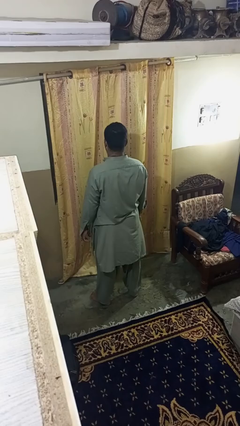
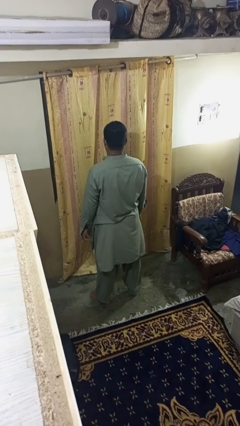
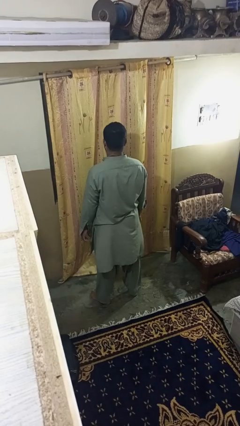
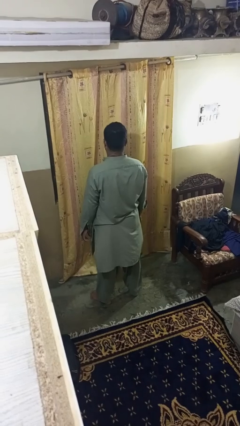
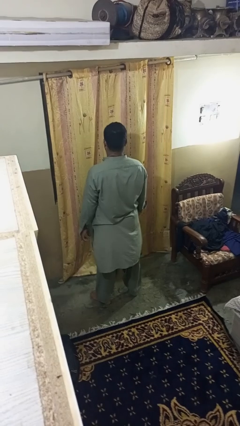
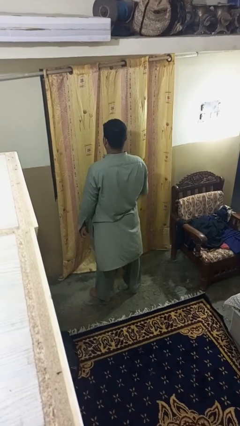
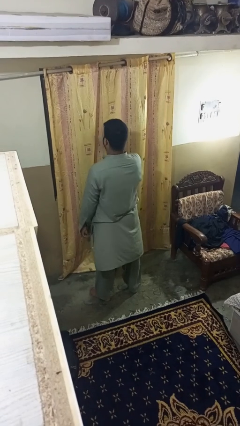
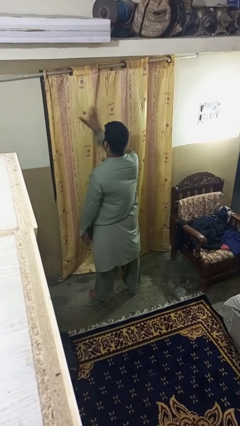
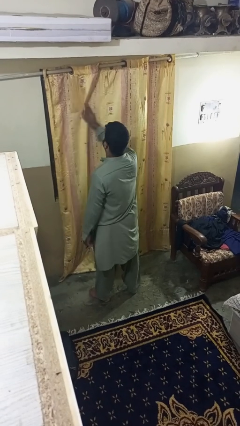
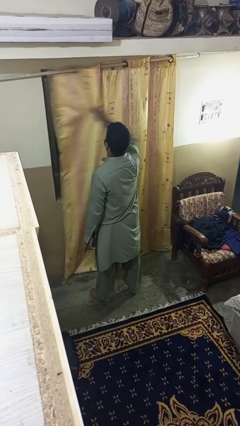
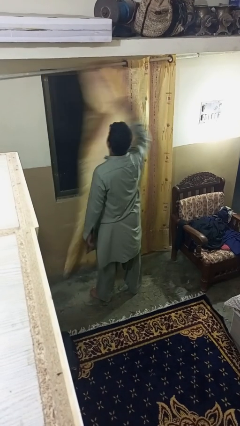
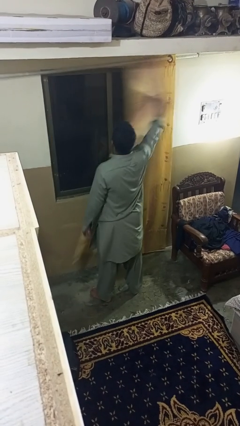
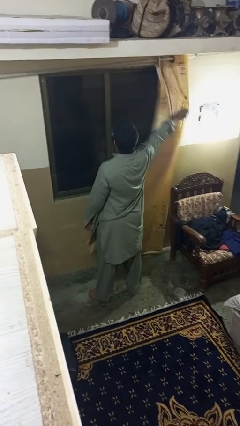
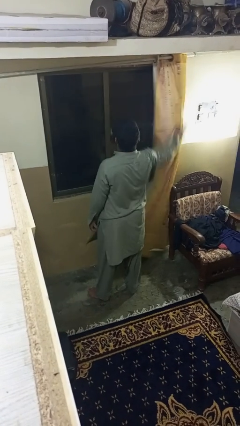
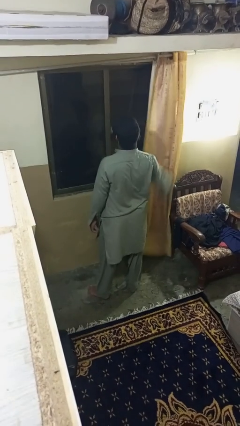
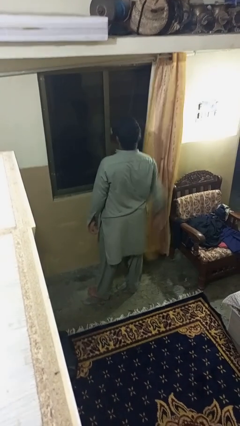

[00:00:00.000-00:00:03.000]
person opens curtains

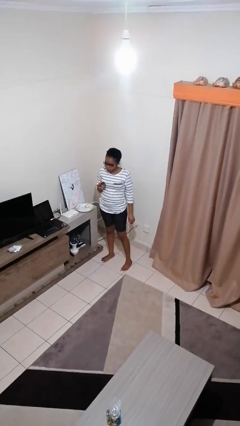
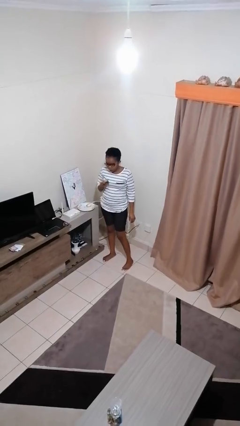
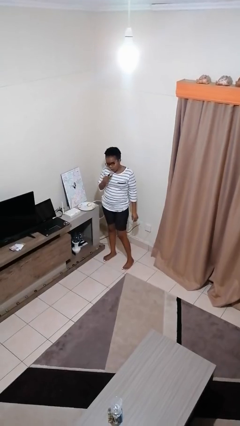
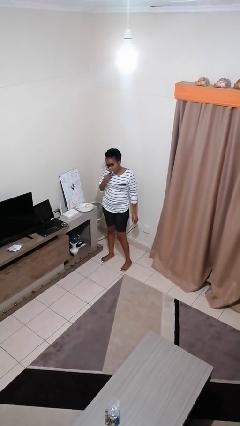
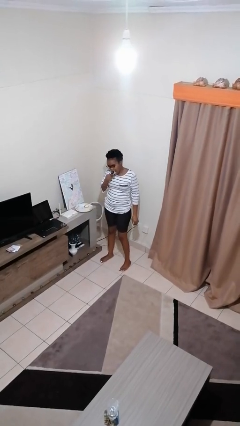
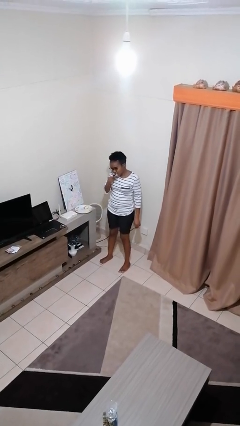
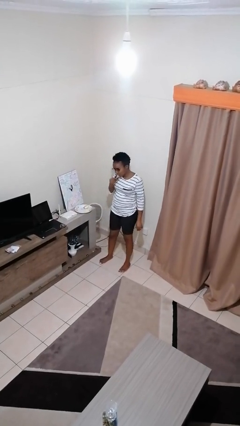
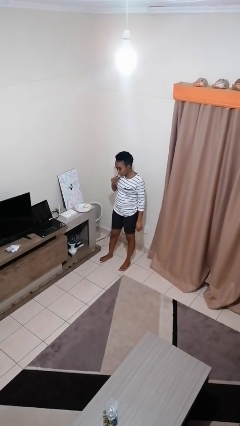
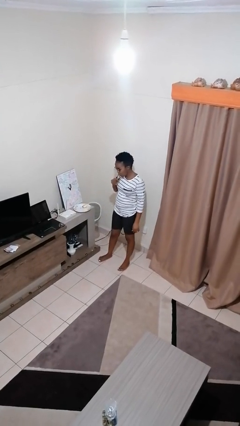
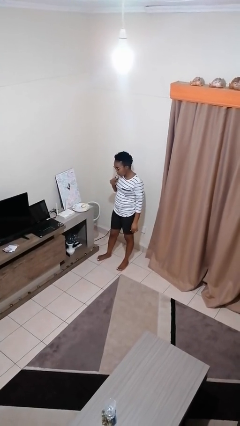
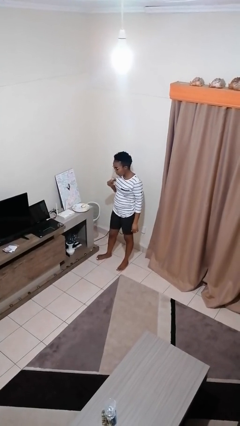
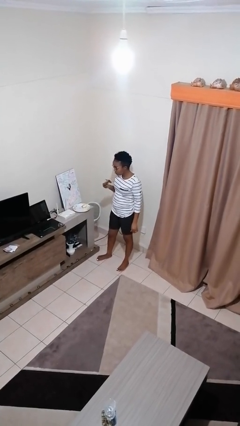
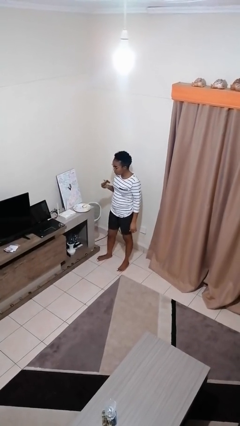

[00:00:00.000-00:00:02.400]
person eats banana

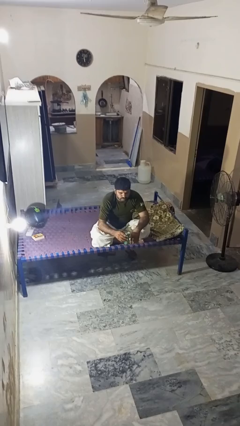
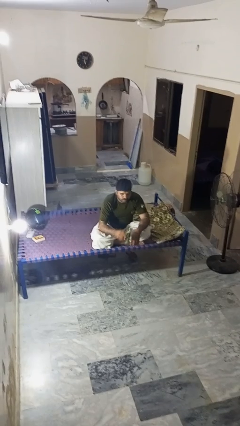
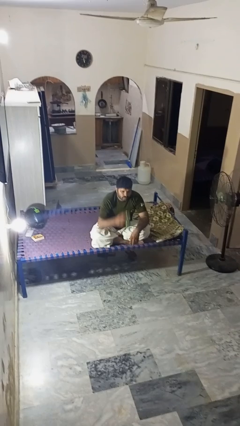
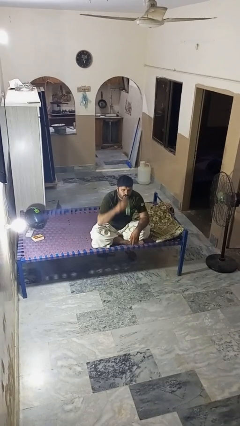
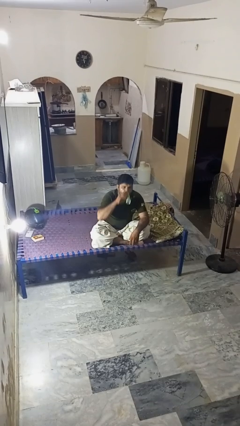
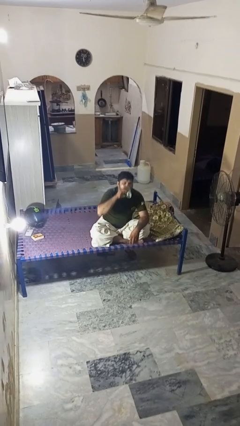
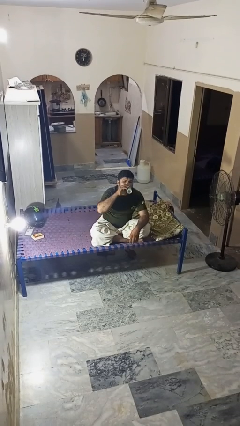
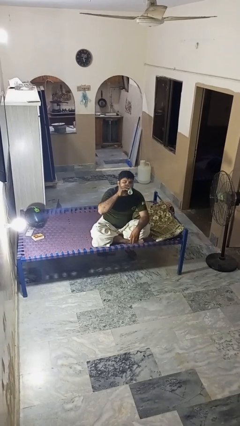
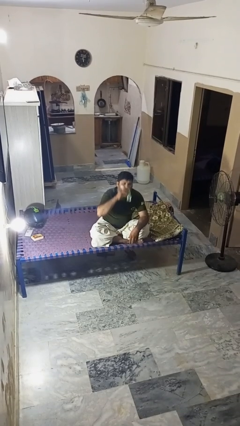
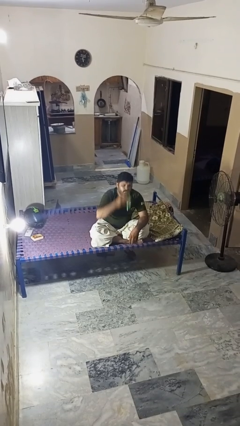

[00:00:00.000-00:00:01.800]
person drinks from beverage can

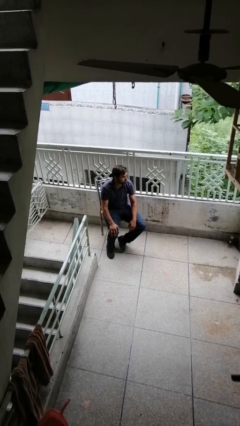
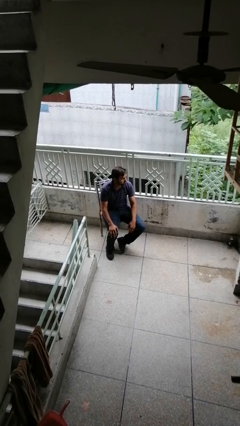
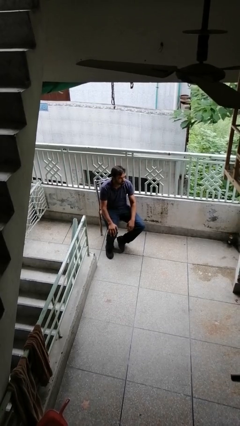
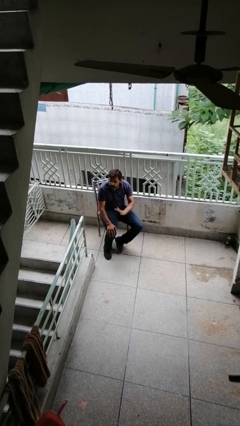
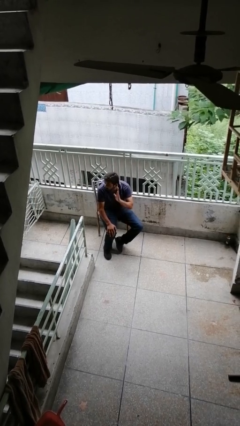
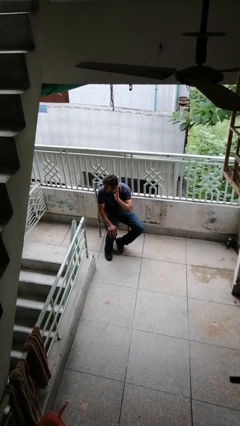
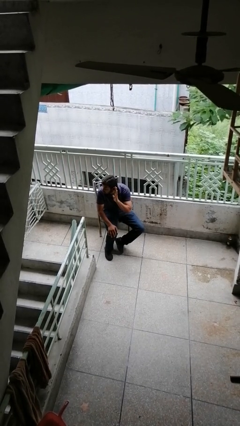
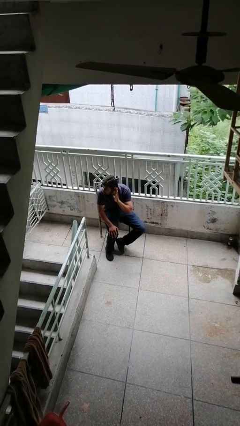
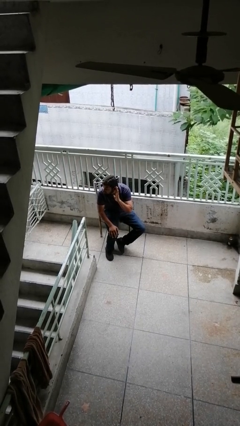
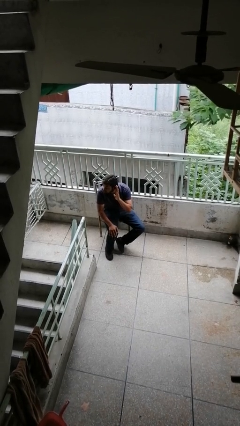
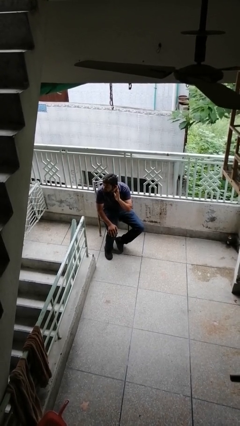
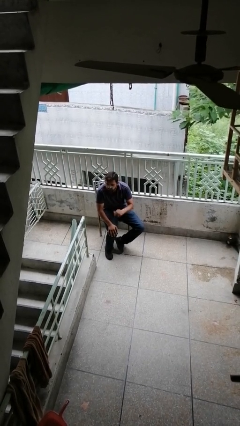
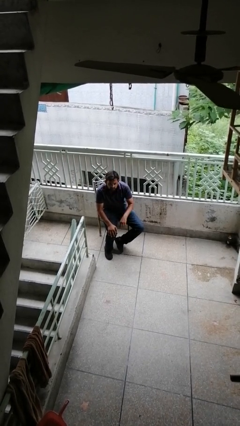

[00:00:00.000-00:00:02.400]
person gestures listen closely

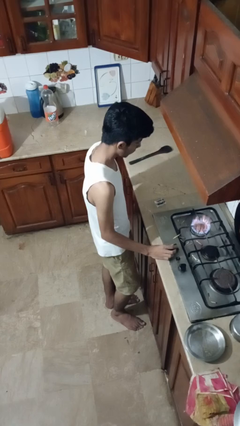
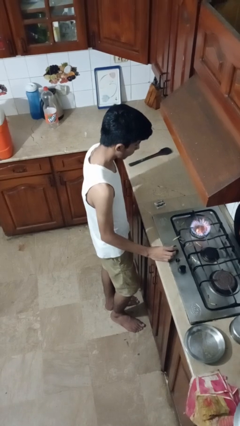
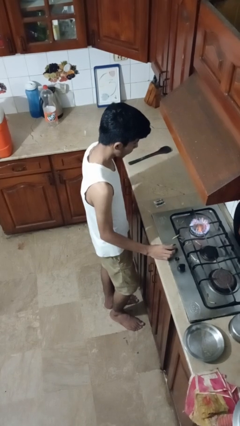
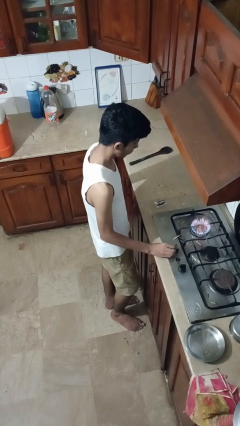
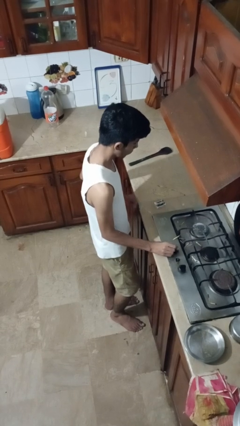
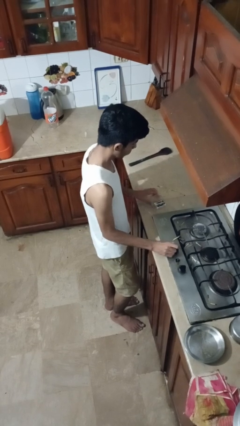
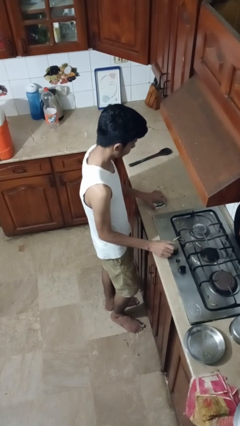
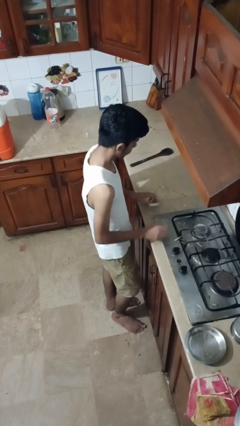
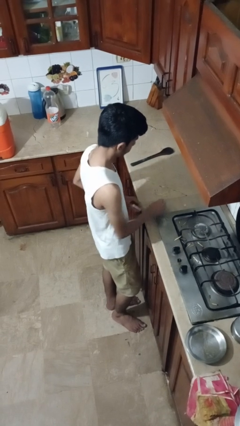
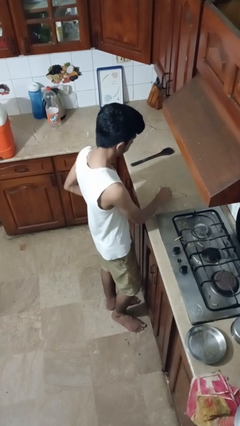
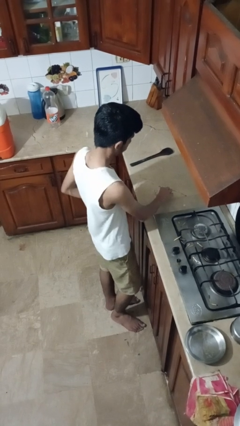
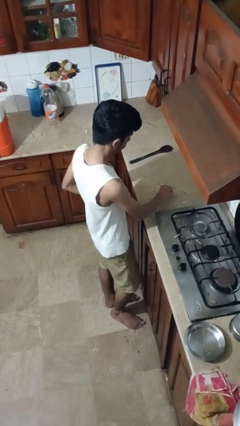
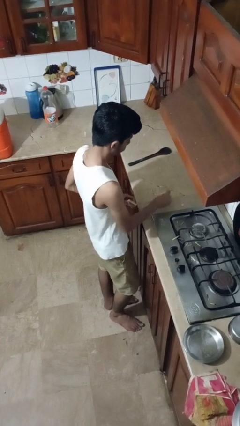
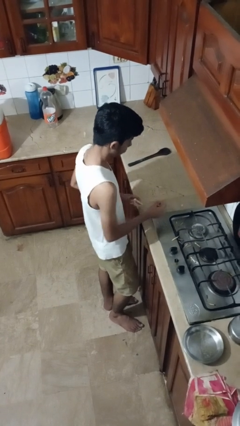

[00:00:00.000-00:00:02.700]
person turns off stovetop

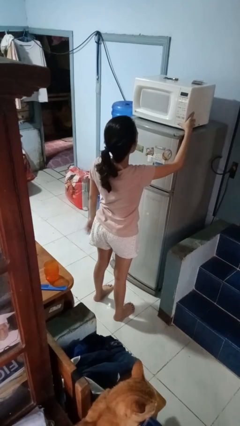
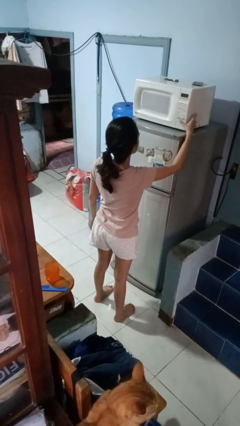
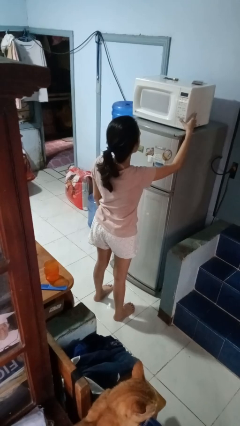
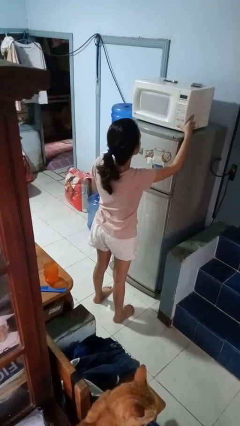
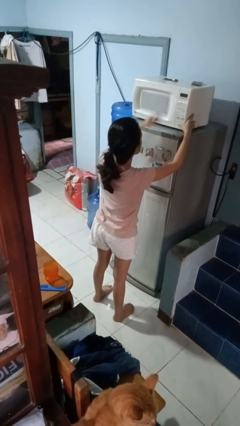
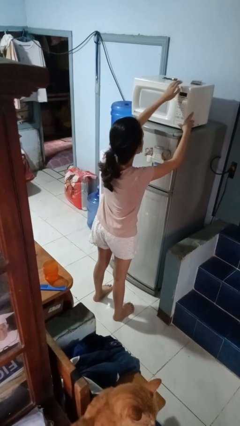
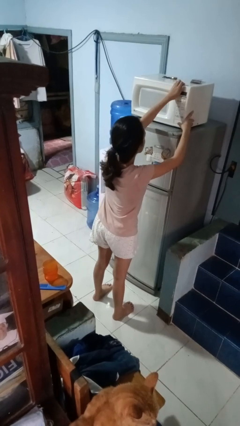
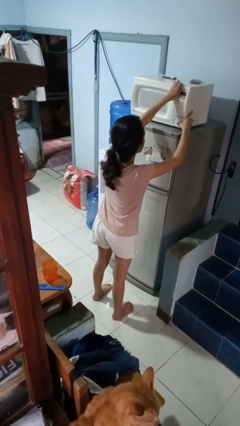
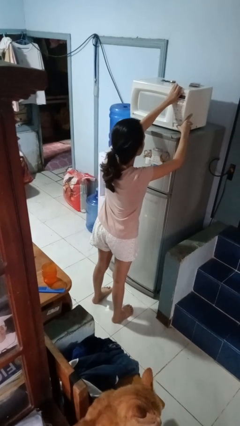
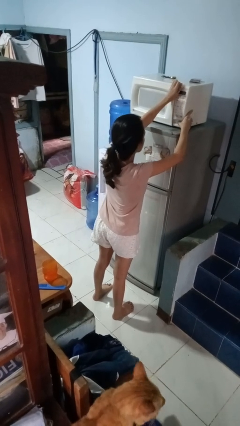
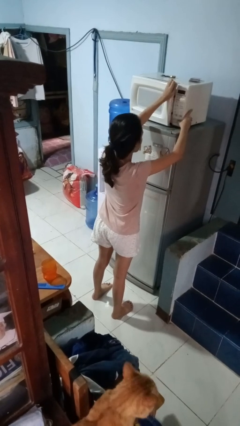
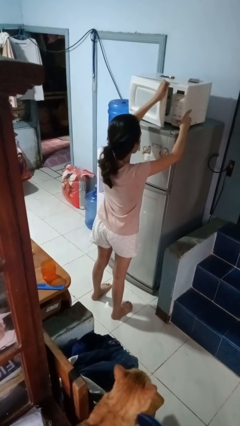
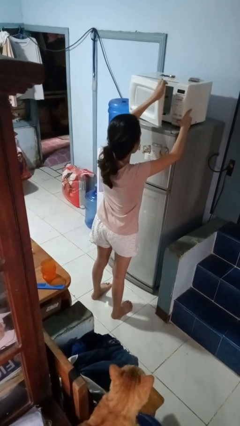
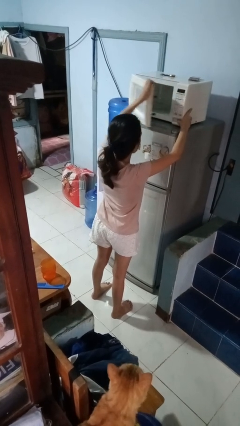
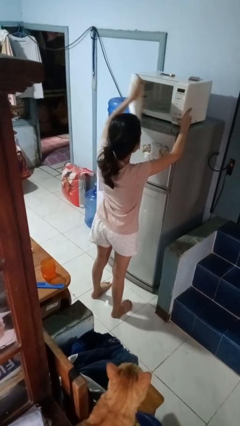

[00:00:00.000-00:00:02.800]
person opens microwave

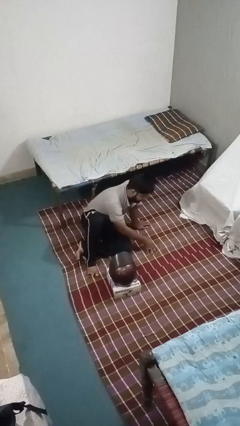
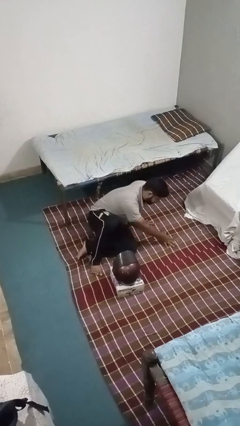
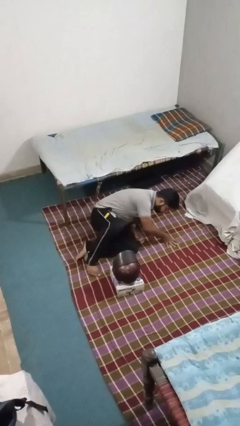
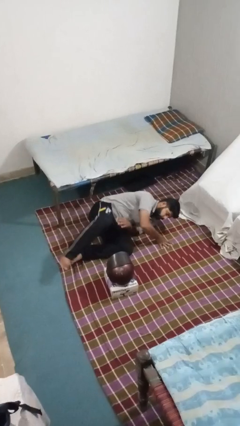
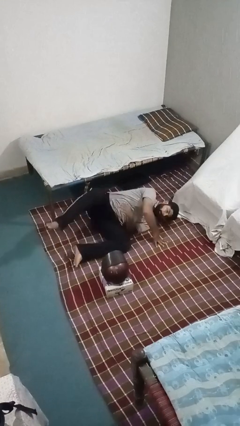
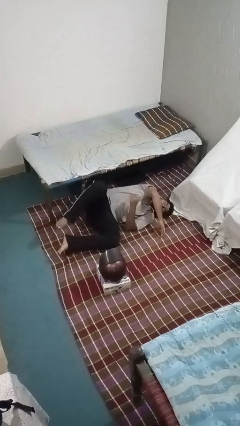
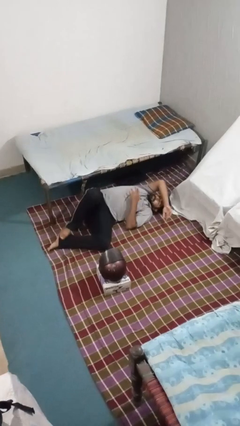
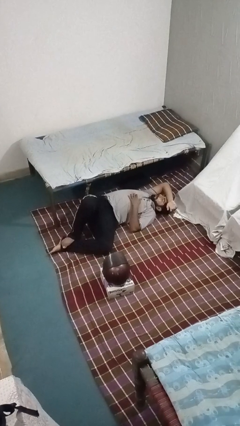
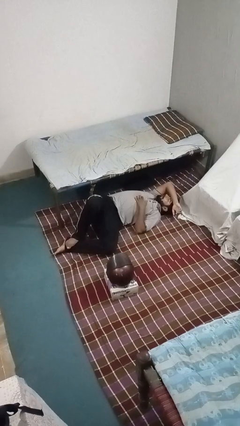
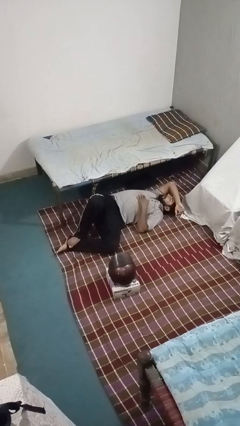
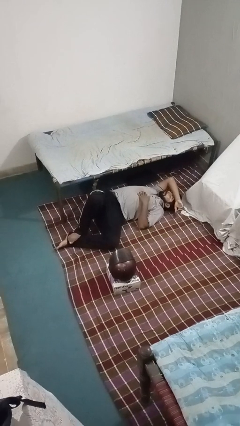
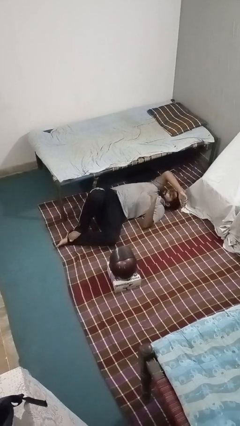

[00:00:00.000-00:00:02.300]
person lies down on floor

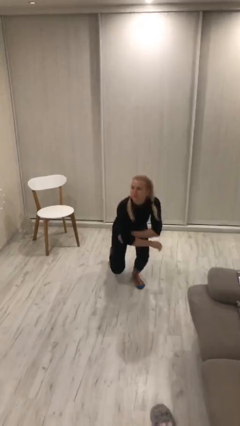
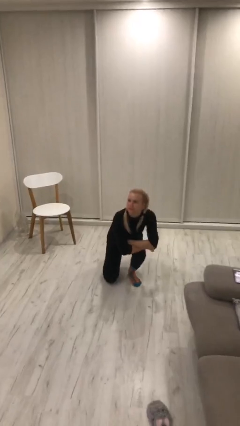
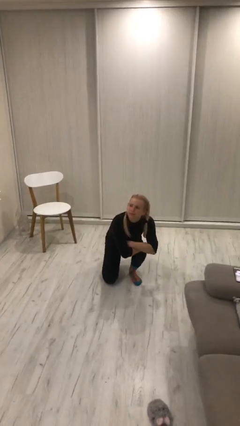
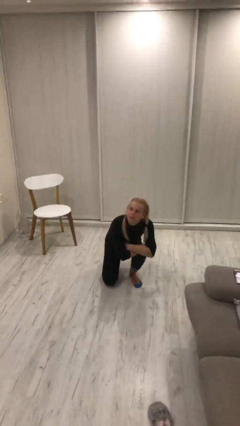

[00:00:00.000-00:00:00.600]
person sits down
